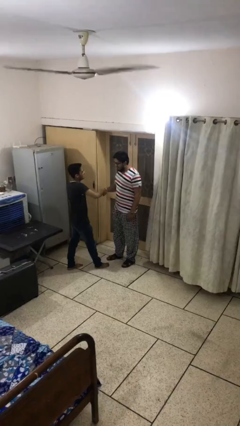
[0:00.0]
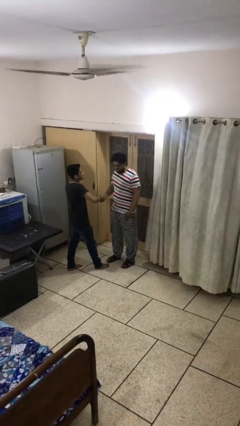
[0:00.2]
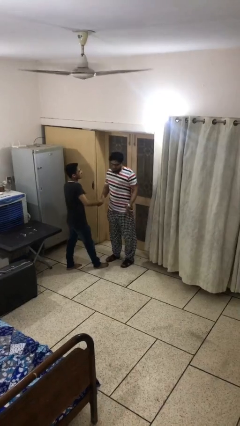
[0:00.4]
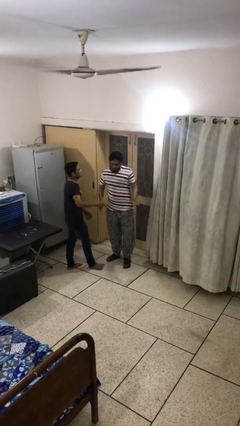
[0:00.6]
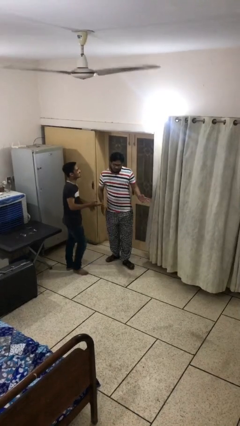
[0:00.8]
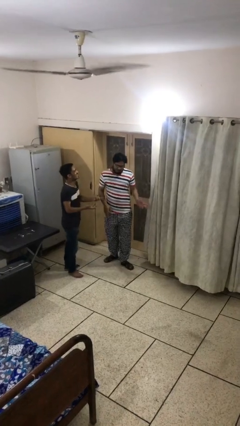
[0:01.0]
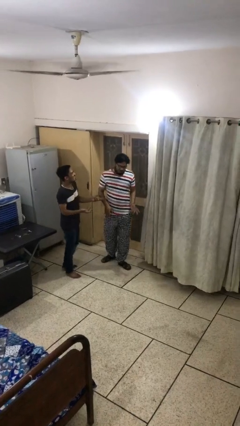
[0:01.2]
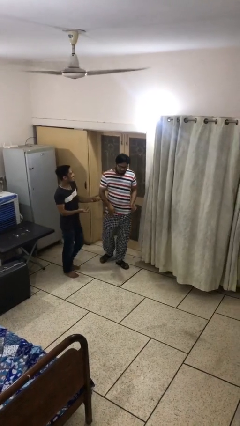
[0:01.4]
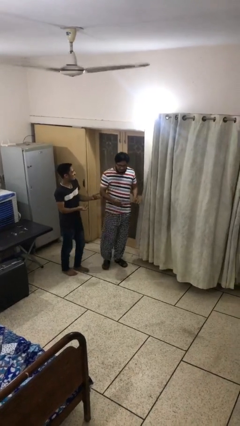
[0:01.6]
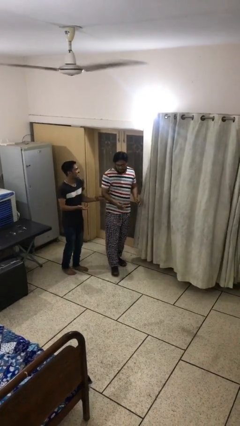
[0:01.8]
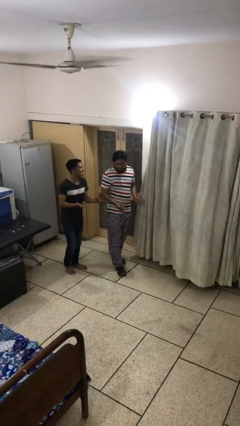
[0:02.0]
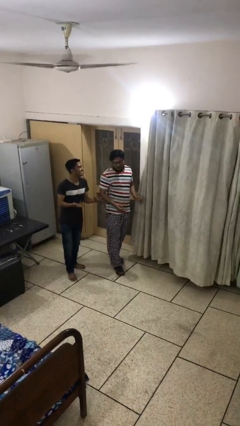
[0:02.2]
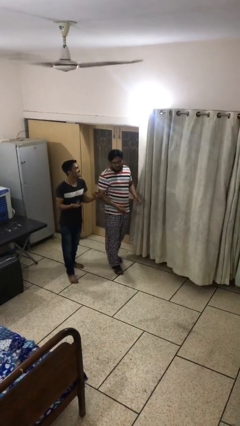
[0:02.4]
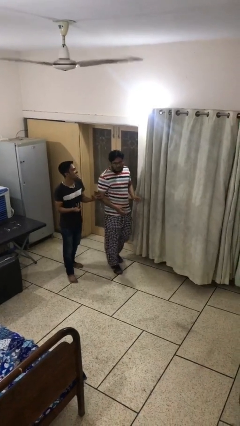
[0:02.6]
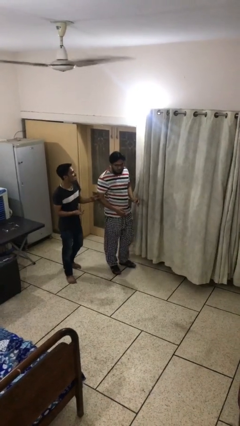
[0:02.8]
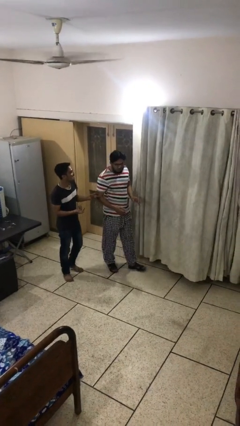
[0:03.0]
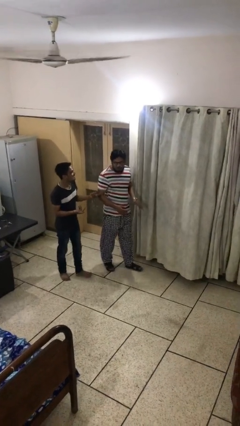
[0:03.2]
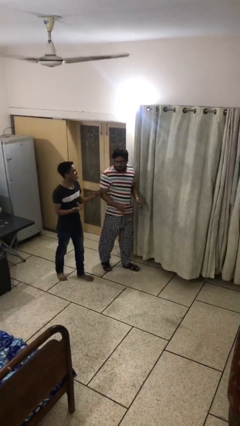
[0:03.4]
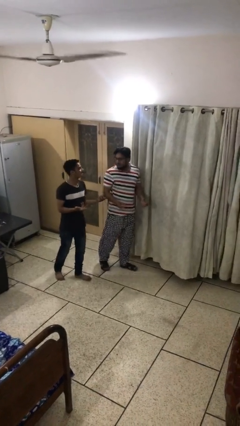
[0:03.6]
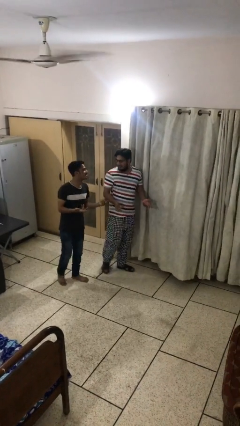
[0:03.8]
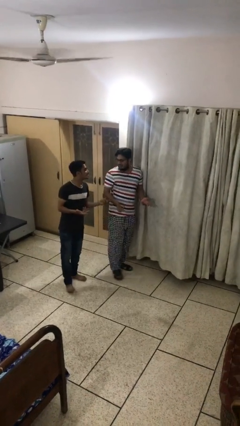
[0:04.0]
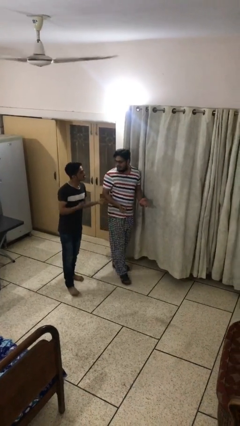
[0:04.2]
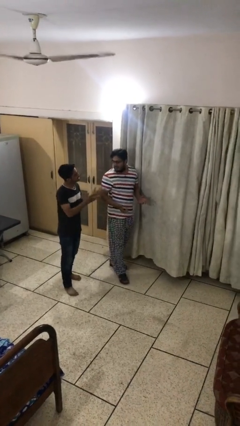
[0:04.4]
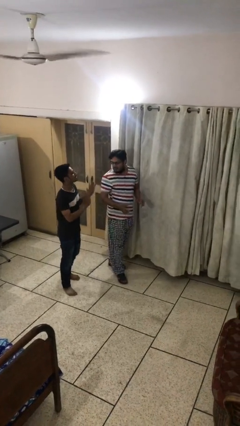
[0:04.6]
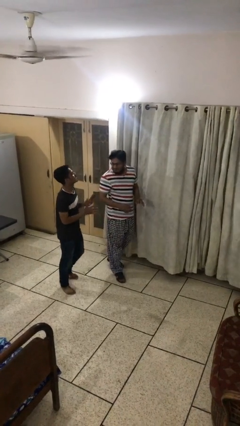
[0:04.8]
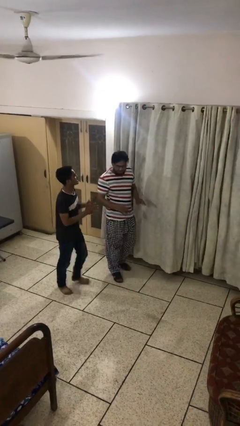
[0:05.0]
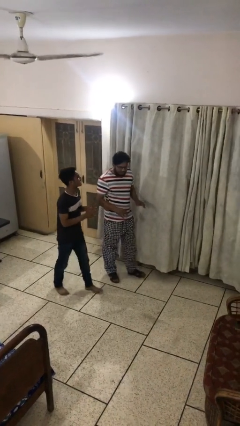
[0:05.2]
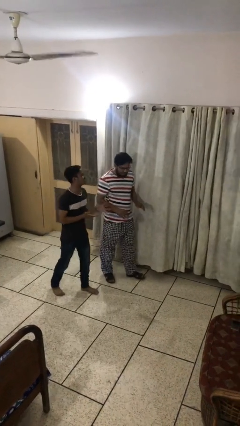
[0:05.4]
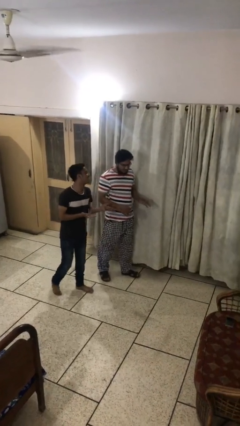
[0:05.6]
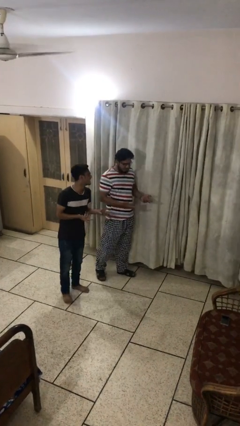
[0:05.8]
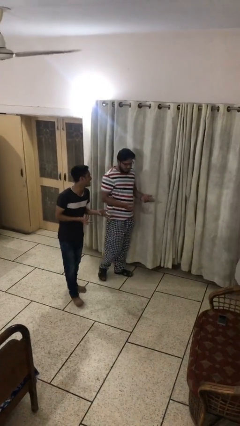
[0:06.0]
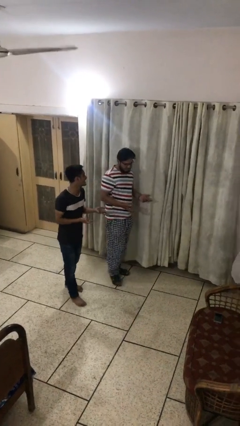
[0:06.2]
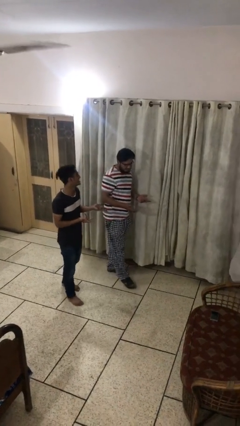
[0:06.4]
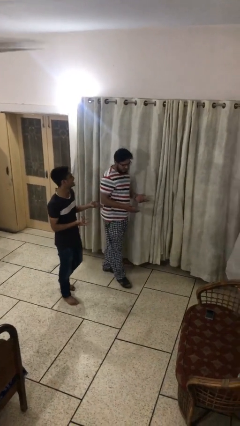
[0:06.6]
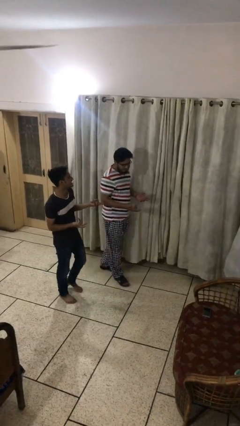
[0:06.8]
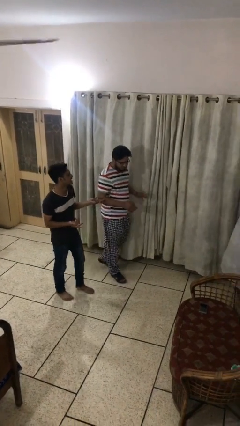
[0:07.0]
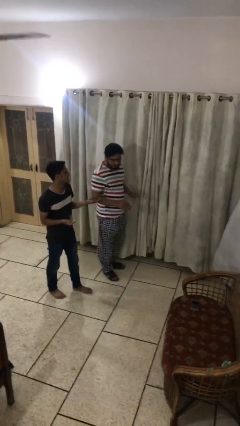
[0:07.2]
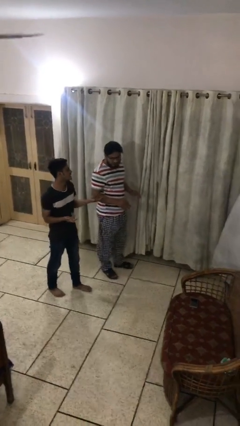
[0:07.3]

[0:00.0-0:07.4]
person talks to person

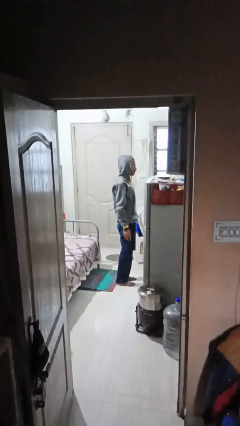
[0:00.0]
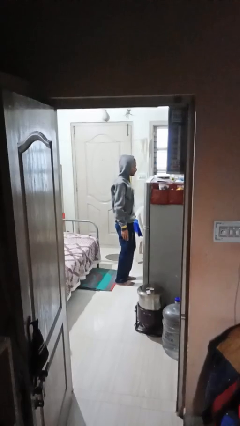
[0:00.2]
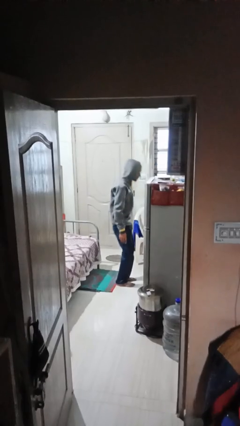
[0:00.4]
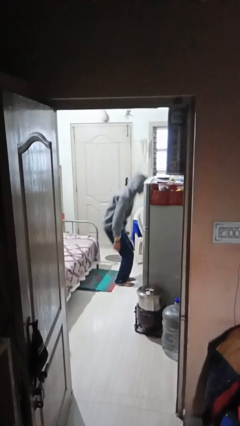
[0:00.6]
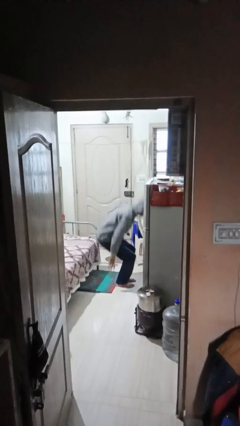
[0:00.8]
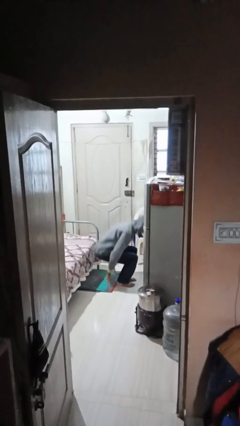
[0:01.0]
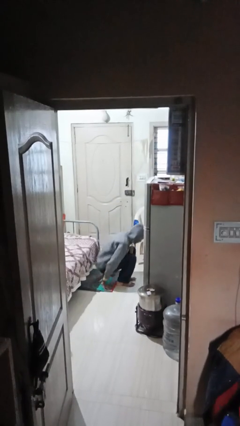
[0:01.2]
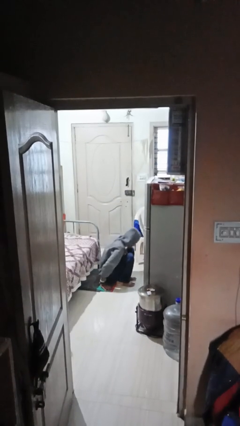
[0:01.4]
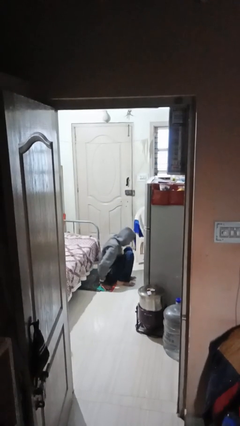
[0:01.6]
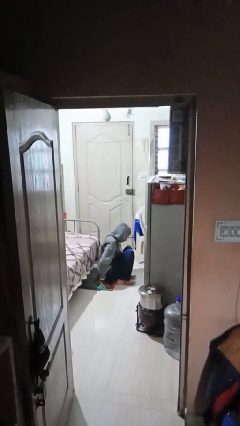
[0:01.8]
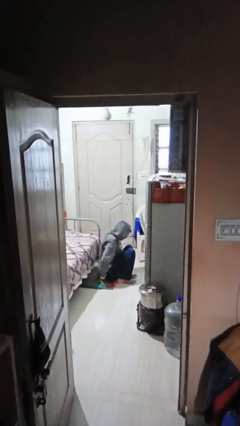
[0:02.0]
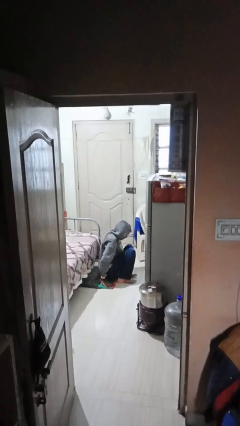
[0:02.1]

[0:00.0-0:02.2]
person sits down

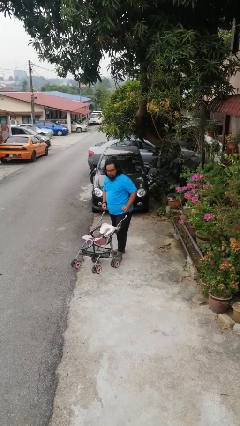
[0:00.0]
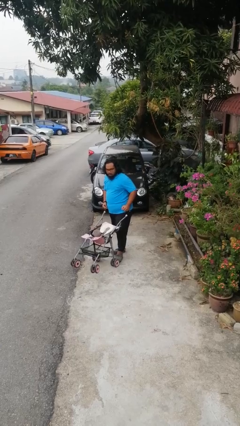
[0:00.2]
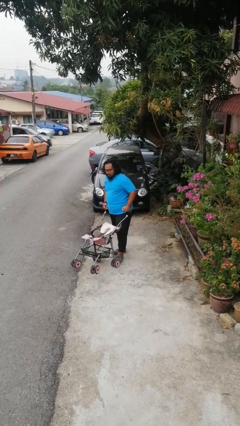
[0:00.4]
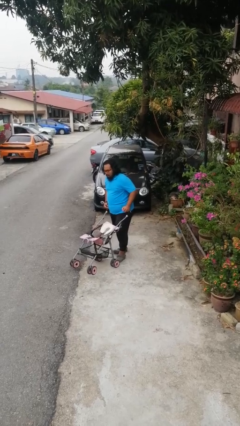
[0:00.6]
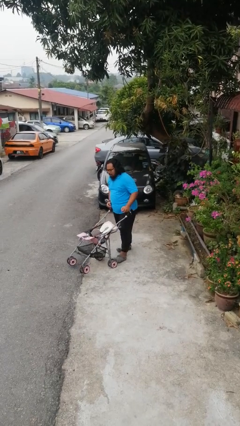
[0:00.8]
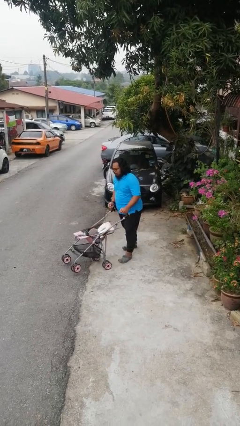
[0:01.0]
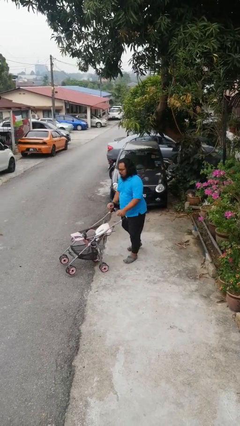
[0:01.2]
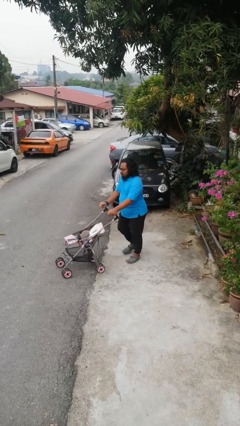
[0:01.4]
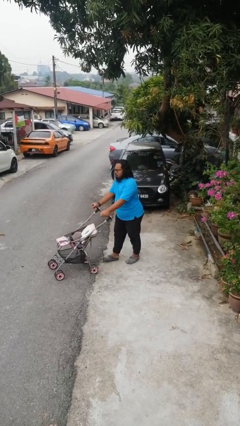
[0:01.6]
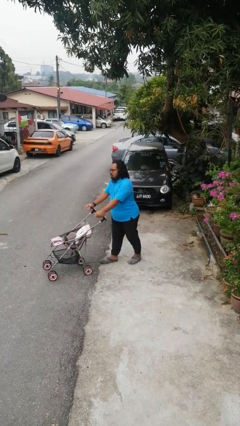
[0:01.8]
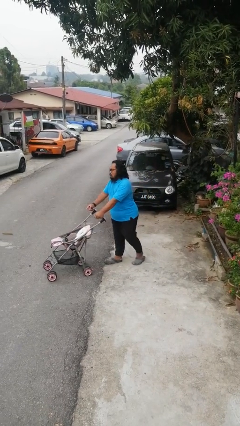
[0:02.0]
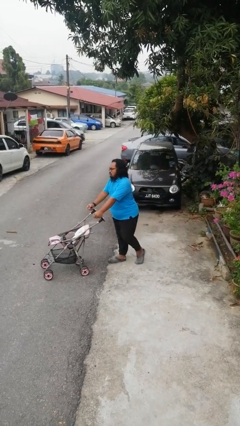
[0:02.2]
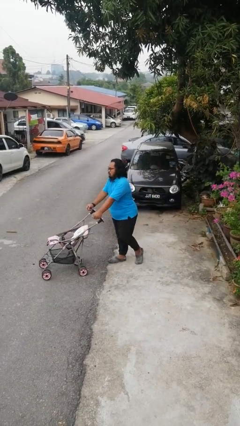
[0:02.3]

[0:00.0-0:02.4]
person pushes wheeled cart

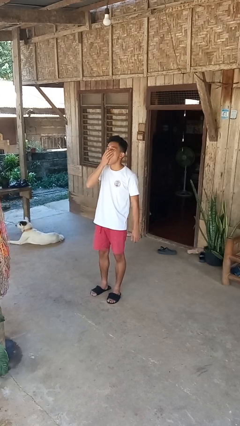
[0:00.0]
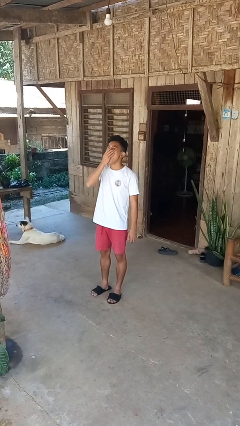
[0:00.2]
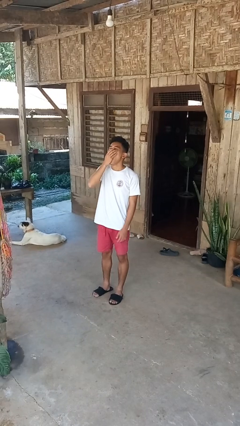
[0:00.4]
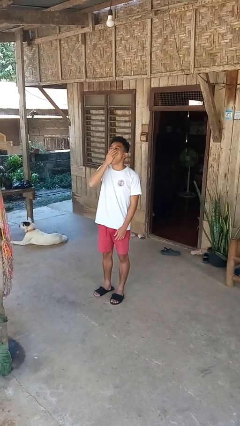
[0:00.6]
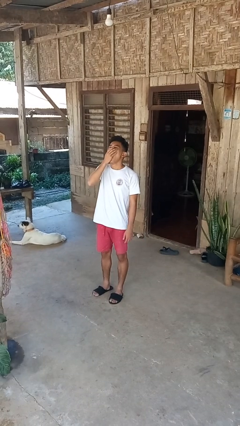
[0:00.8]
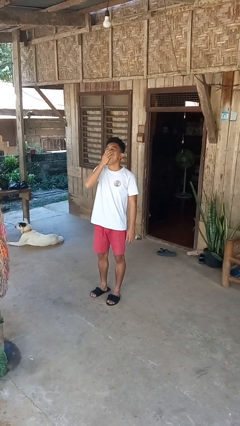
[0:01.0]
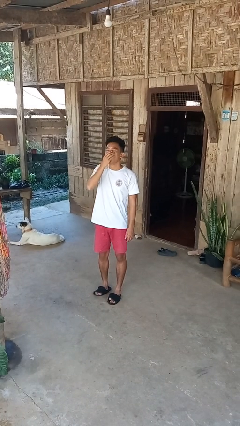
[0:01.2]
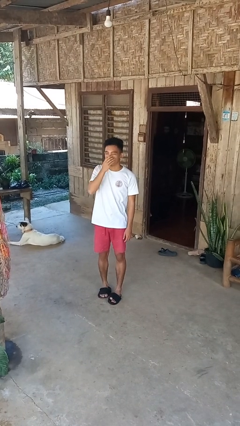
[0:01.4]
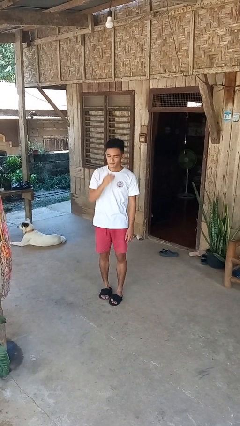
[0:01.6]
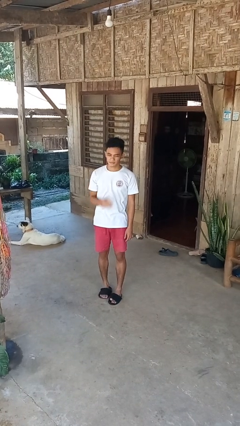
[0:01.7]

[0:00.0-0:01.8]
person yawns

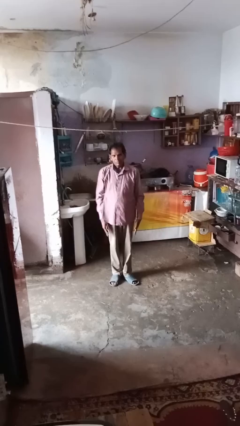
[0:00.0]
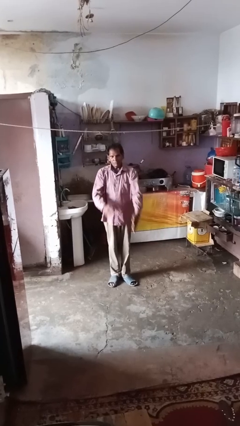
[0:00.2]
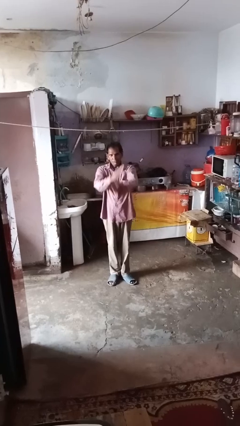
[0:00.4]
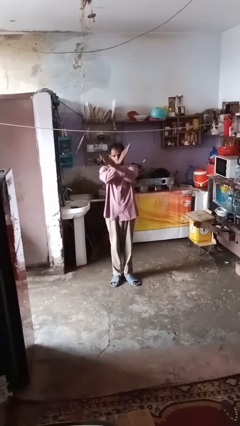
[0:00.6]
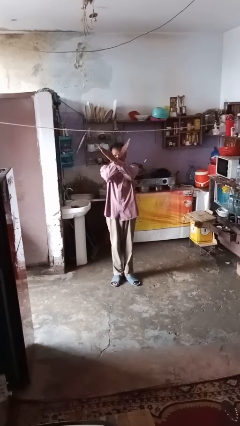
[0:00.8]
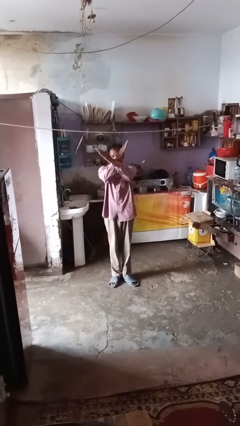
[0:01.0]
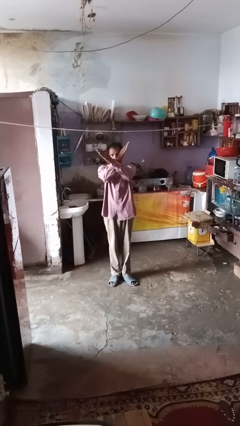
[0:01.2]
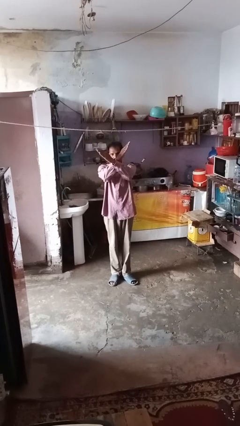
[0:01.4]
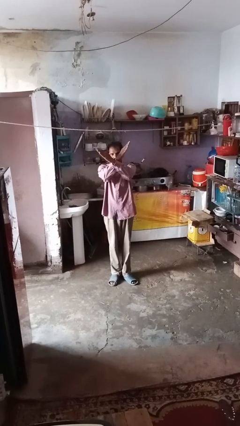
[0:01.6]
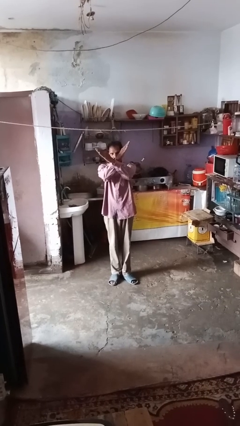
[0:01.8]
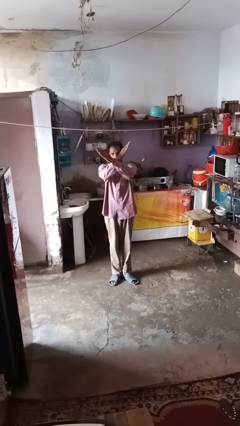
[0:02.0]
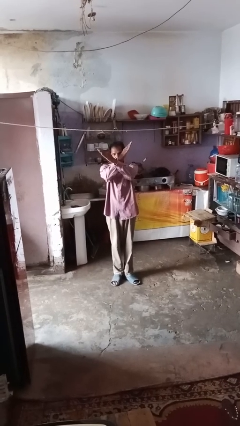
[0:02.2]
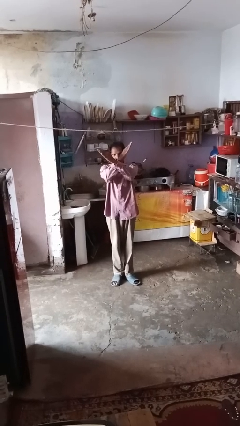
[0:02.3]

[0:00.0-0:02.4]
person gestures arms x

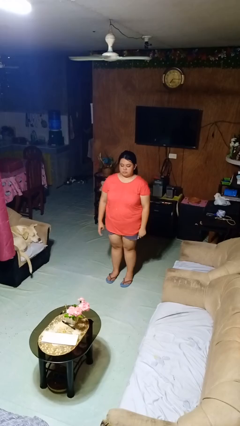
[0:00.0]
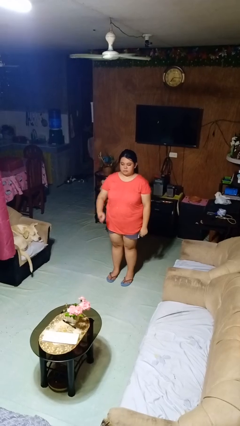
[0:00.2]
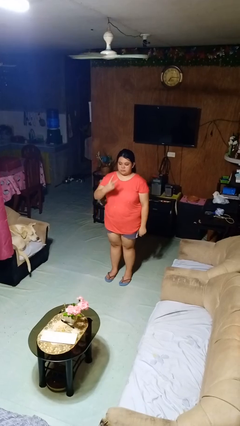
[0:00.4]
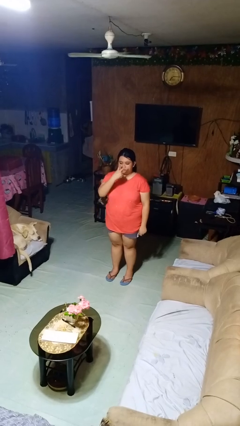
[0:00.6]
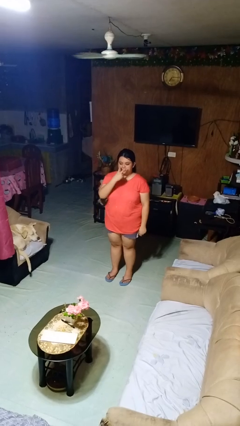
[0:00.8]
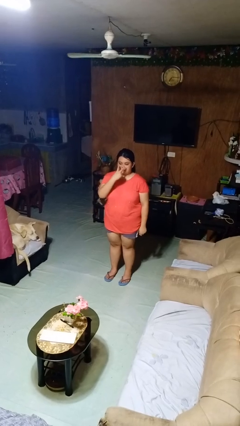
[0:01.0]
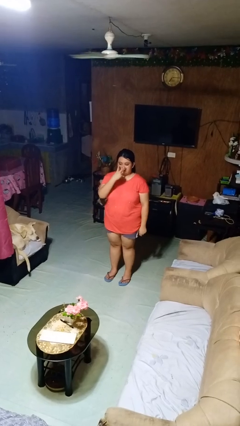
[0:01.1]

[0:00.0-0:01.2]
person gestures watch closely

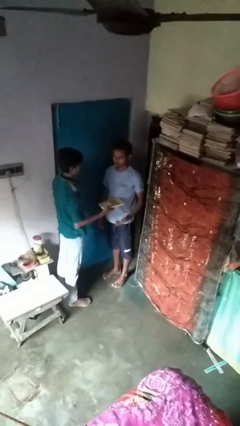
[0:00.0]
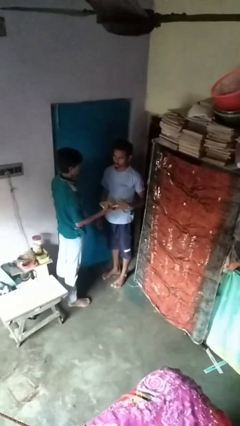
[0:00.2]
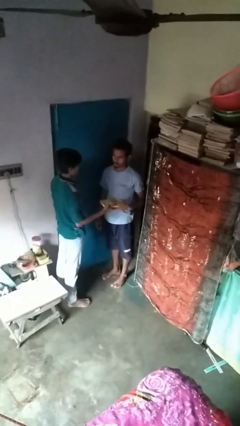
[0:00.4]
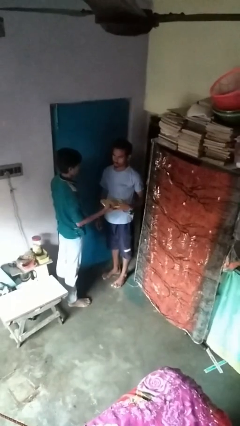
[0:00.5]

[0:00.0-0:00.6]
person transfers object to person
